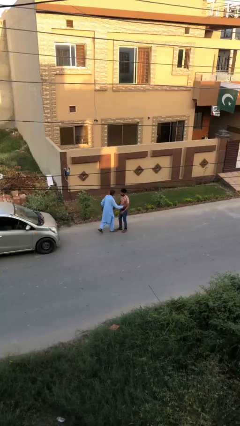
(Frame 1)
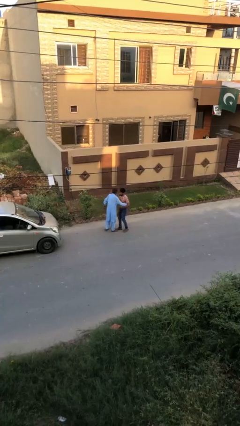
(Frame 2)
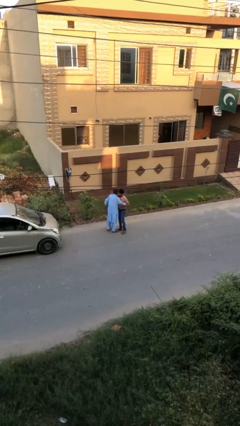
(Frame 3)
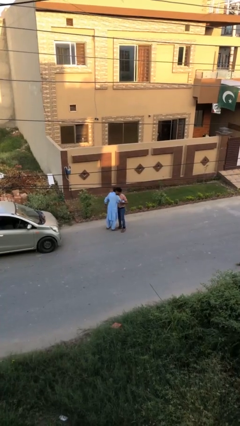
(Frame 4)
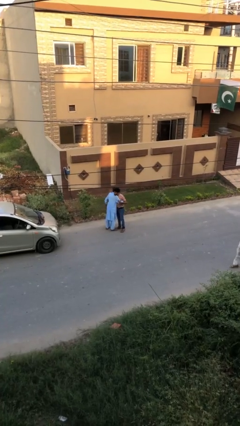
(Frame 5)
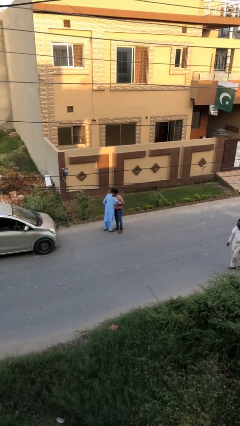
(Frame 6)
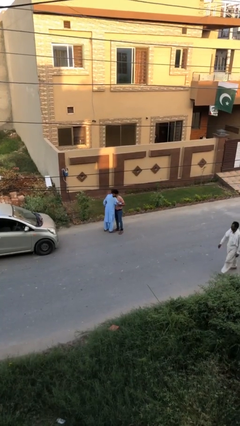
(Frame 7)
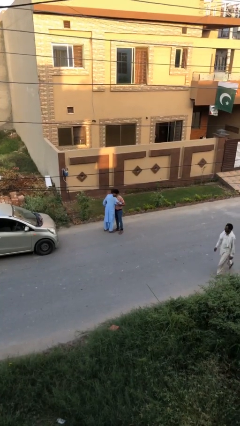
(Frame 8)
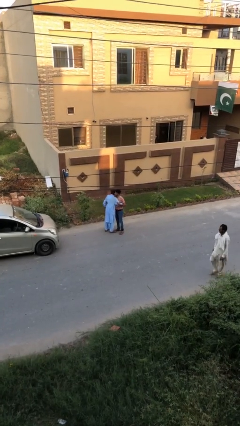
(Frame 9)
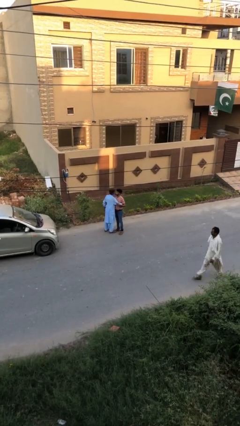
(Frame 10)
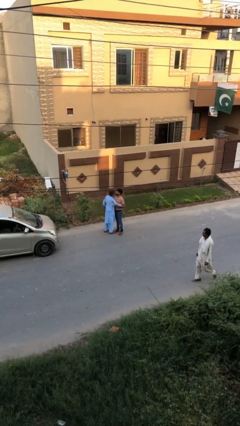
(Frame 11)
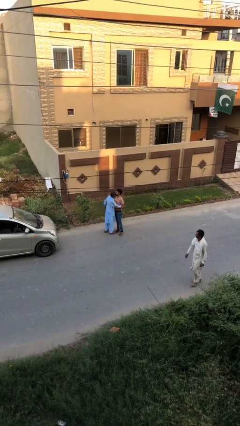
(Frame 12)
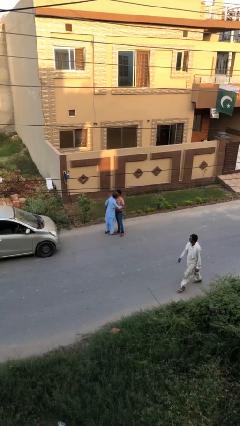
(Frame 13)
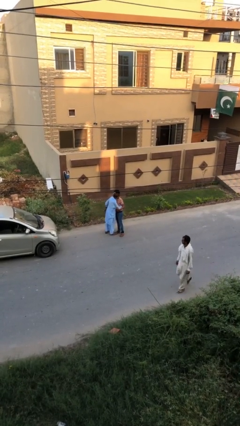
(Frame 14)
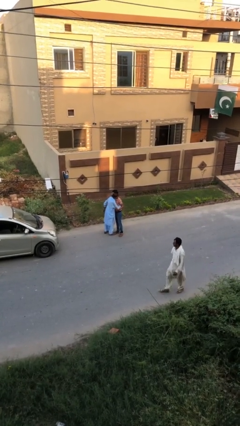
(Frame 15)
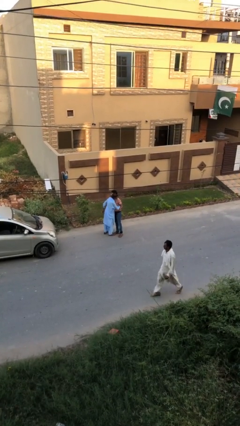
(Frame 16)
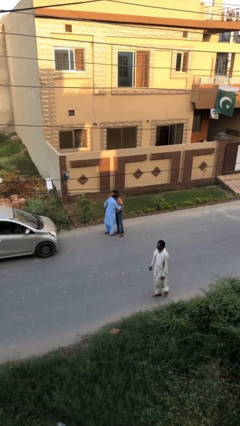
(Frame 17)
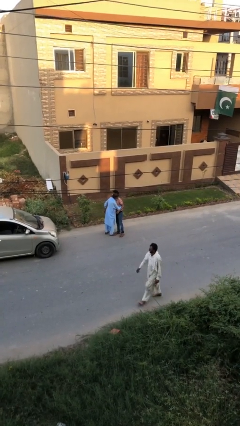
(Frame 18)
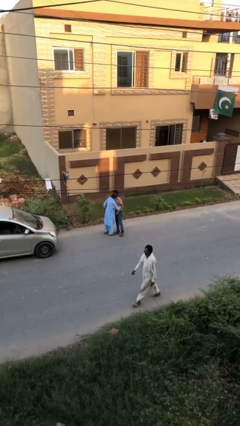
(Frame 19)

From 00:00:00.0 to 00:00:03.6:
person embraces person

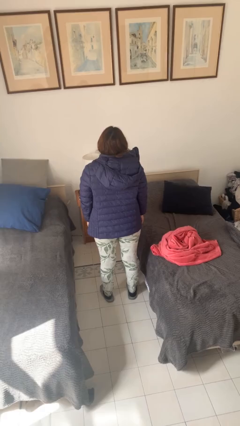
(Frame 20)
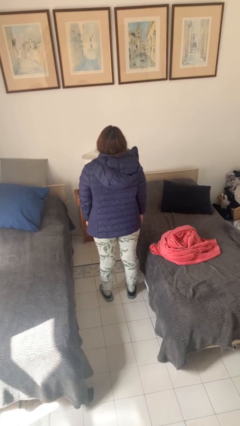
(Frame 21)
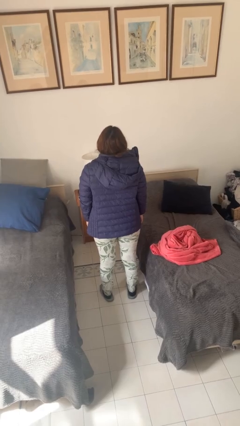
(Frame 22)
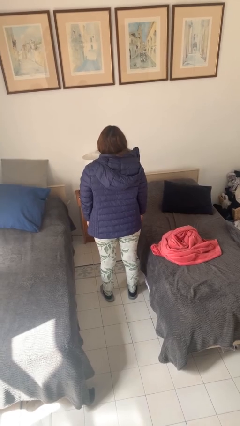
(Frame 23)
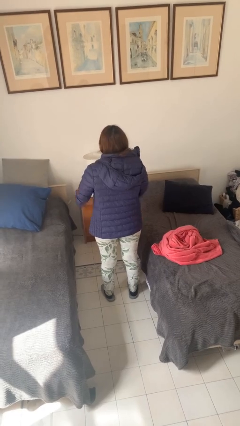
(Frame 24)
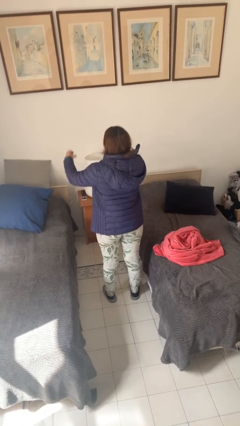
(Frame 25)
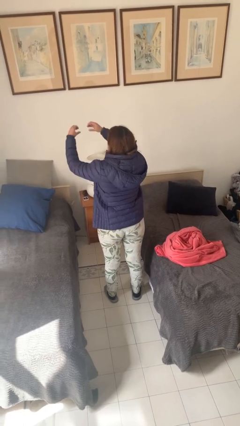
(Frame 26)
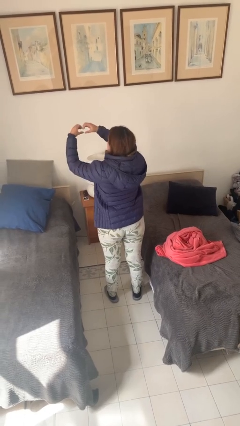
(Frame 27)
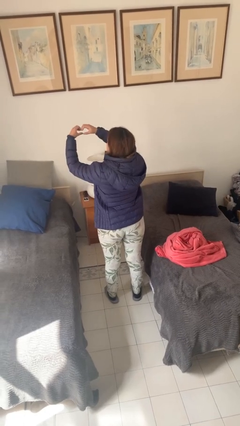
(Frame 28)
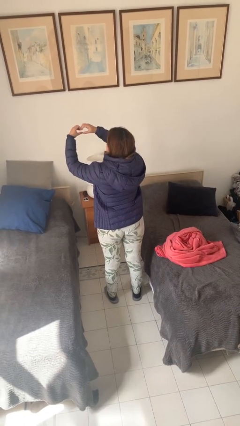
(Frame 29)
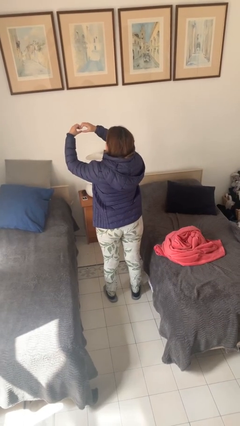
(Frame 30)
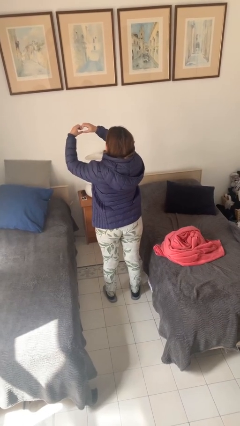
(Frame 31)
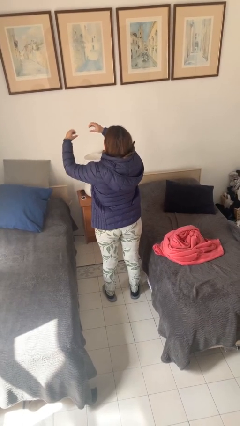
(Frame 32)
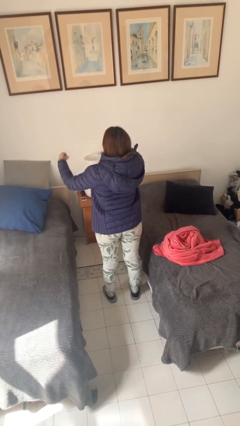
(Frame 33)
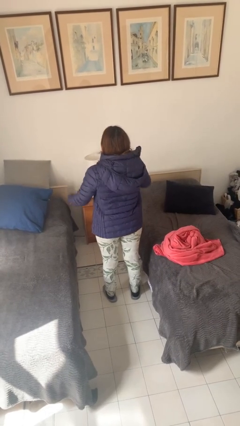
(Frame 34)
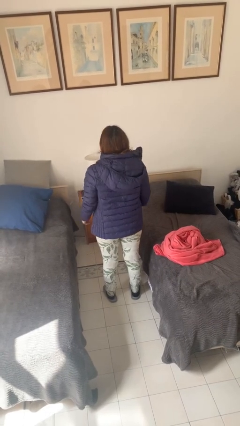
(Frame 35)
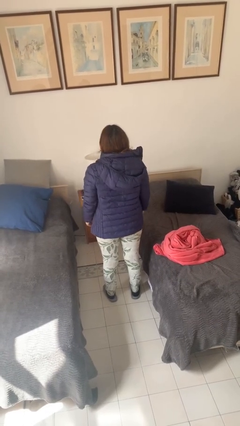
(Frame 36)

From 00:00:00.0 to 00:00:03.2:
person gestures heart

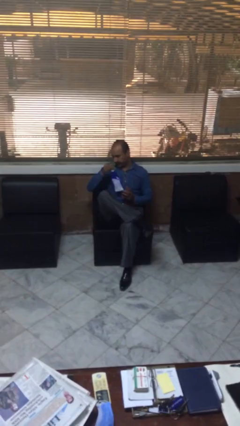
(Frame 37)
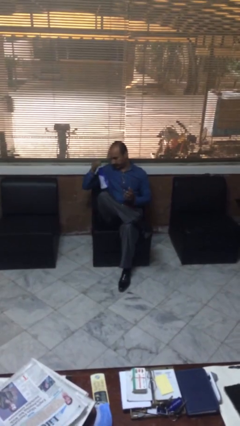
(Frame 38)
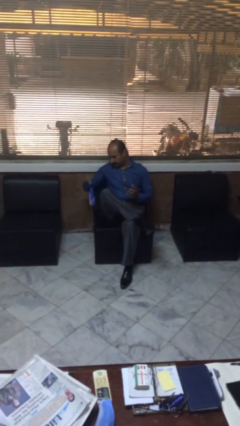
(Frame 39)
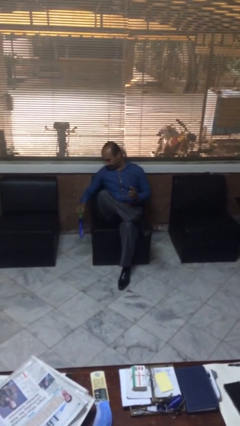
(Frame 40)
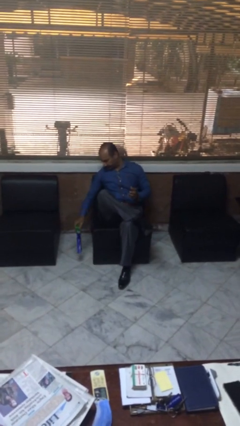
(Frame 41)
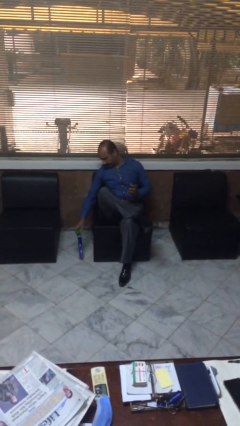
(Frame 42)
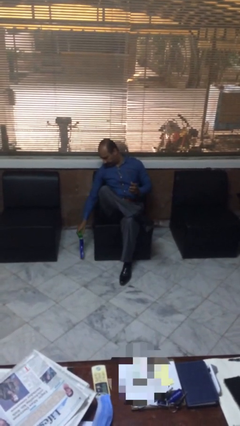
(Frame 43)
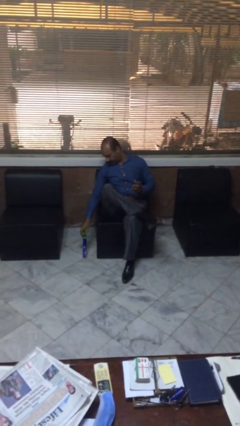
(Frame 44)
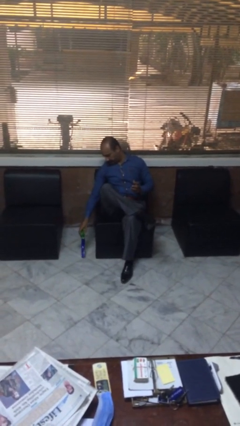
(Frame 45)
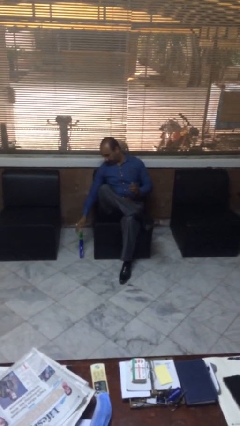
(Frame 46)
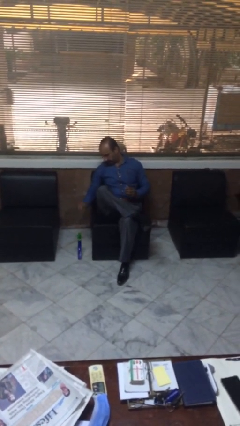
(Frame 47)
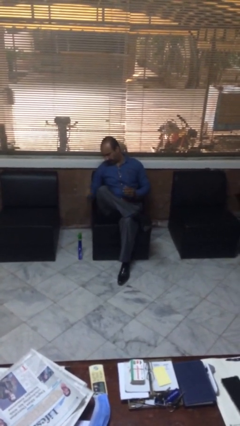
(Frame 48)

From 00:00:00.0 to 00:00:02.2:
person puts down object on floor

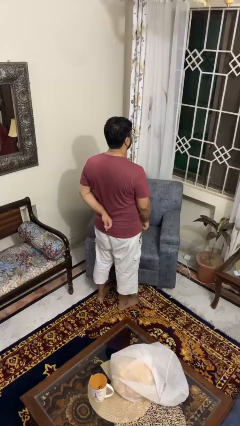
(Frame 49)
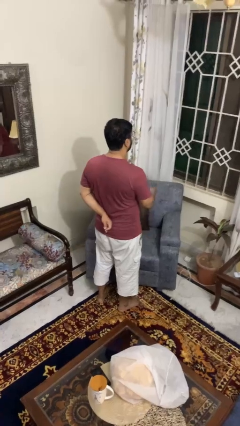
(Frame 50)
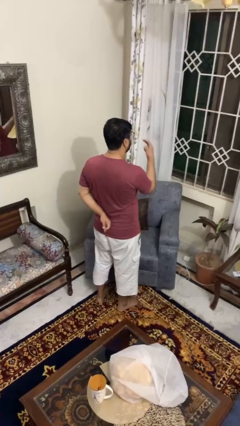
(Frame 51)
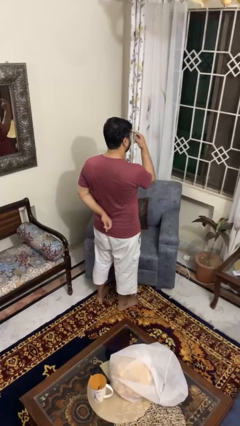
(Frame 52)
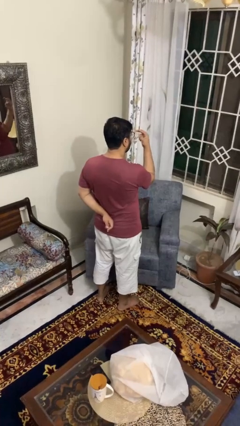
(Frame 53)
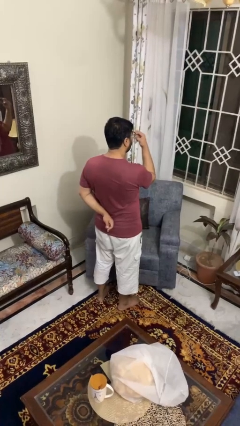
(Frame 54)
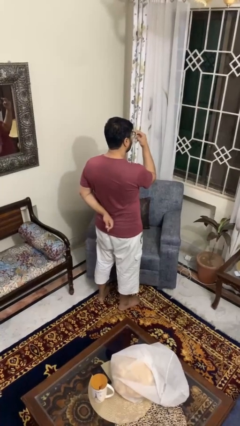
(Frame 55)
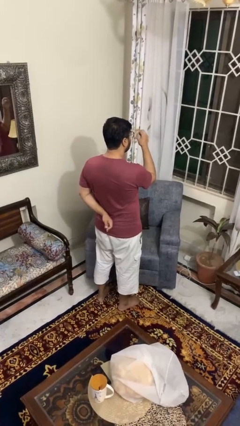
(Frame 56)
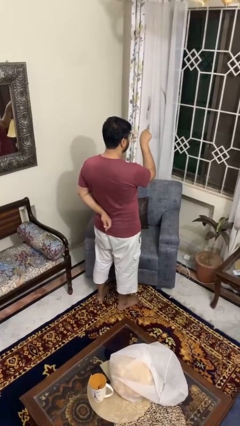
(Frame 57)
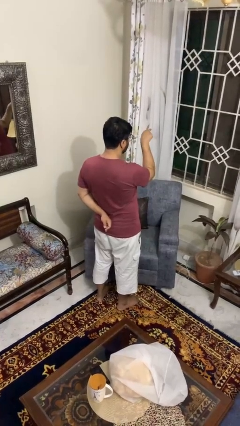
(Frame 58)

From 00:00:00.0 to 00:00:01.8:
person gestures watch closely

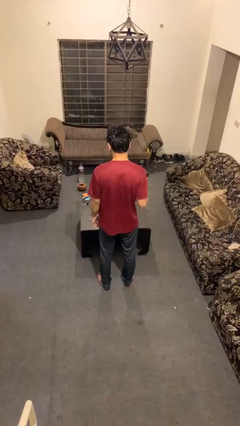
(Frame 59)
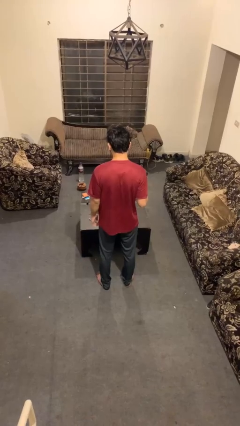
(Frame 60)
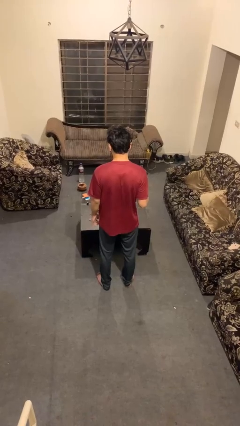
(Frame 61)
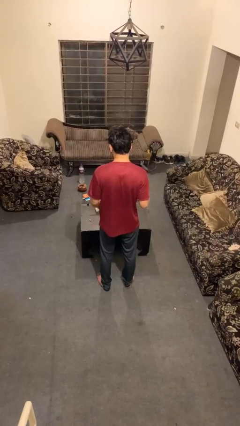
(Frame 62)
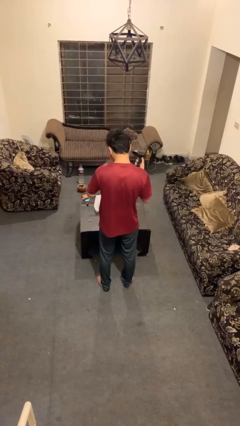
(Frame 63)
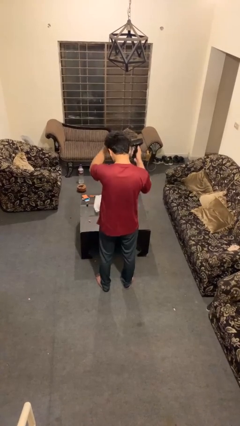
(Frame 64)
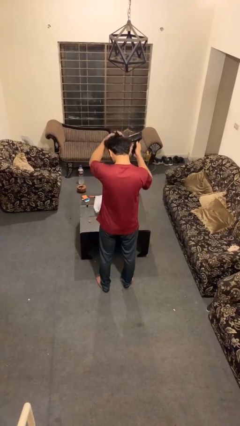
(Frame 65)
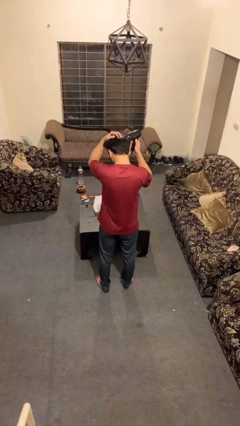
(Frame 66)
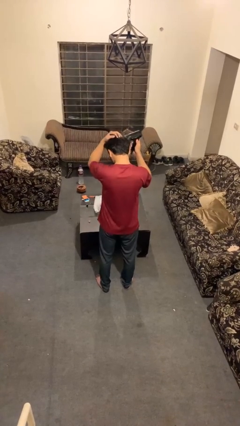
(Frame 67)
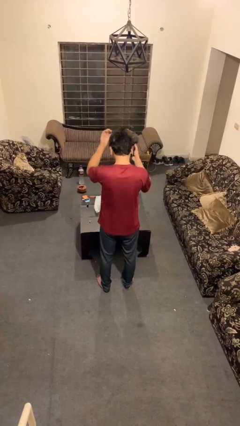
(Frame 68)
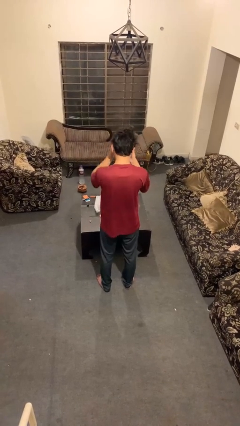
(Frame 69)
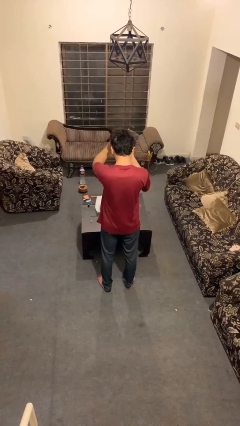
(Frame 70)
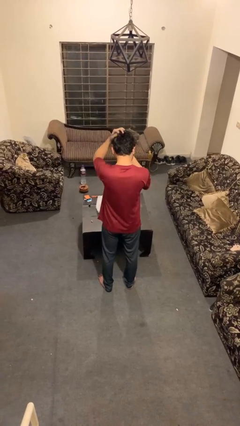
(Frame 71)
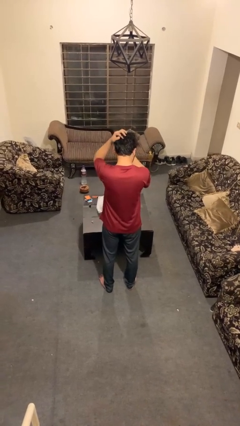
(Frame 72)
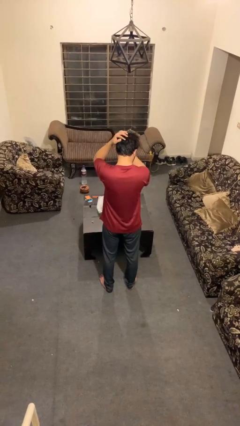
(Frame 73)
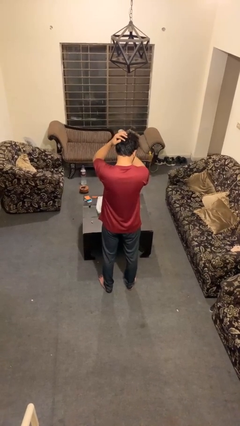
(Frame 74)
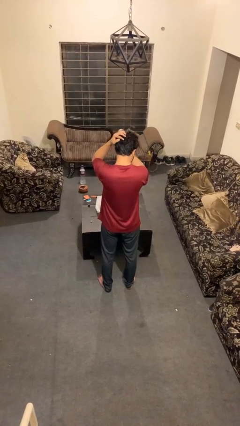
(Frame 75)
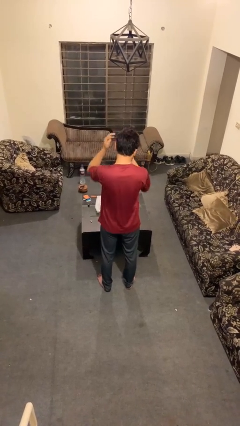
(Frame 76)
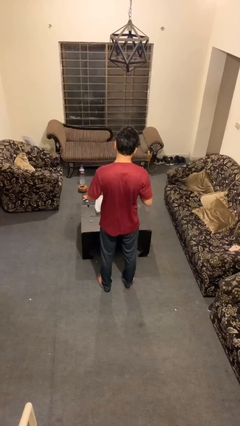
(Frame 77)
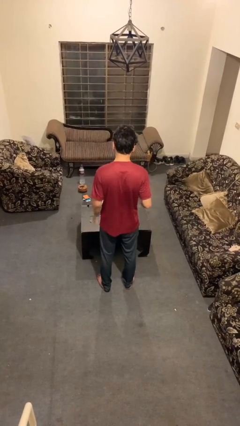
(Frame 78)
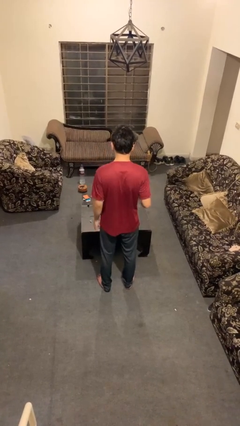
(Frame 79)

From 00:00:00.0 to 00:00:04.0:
person dries hair with hairdryer

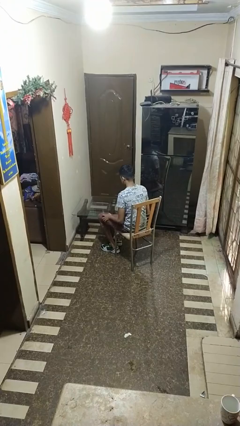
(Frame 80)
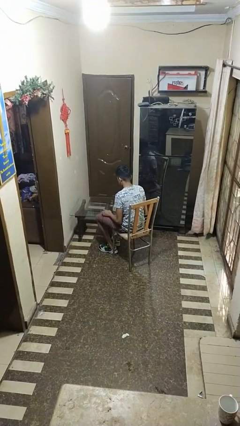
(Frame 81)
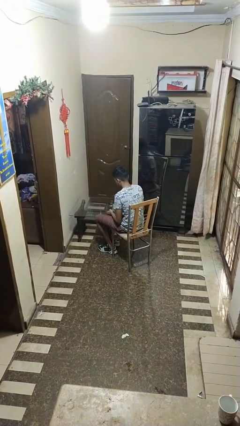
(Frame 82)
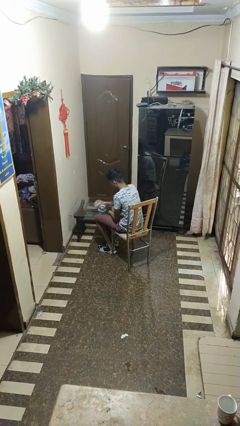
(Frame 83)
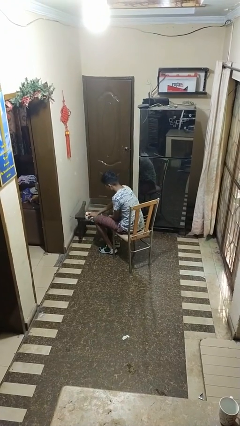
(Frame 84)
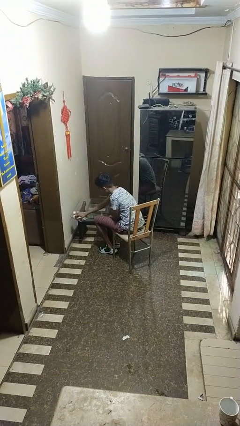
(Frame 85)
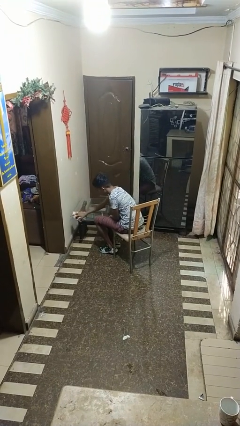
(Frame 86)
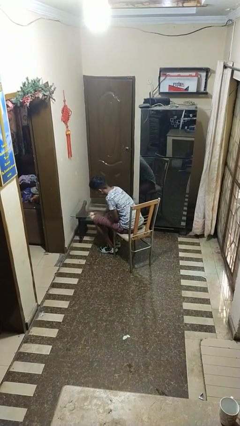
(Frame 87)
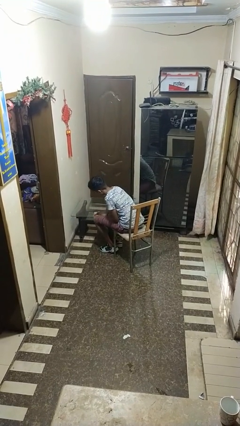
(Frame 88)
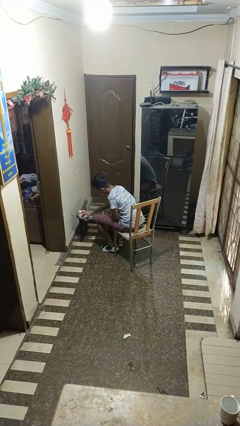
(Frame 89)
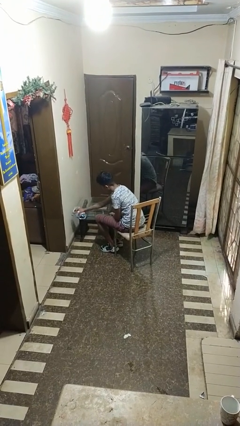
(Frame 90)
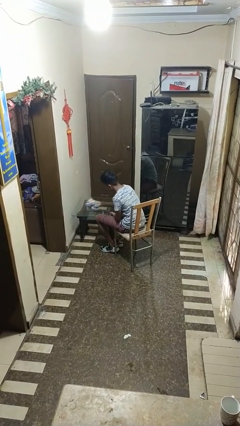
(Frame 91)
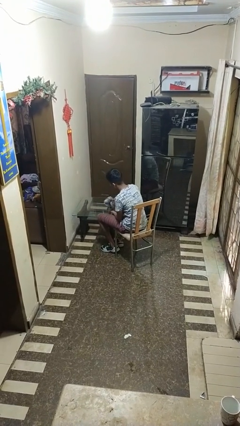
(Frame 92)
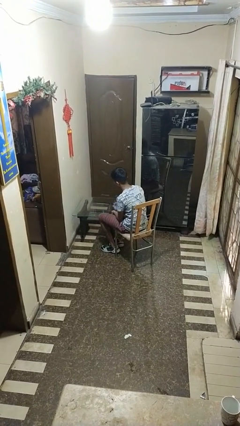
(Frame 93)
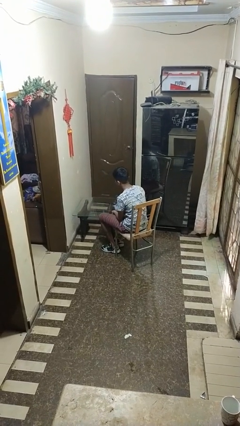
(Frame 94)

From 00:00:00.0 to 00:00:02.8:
person cleans table with rag
